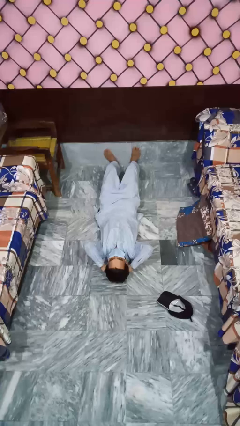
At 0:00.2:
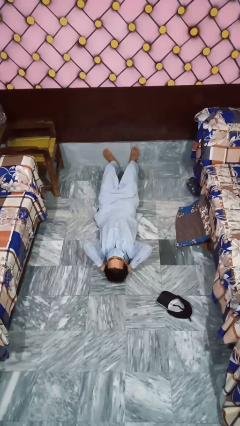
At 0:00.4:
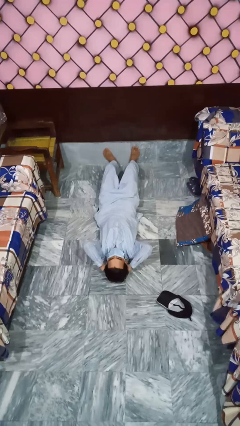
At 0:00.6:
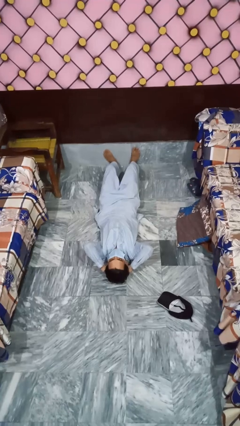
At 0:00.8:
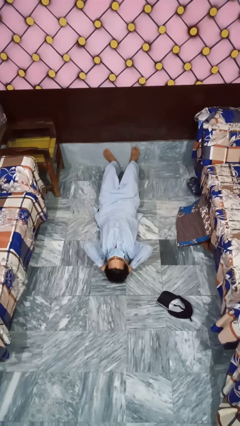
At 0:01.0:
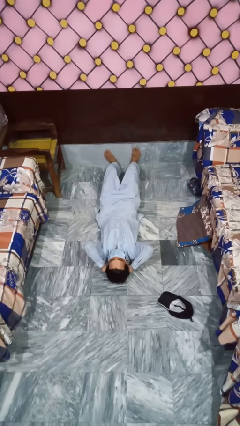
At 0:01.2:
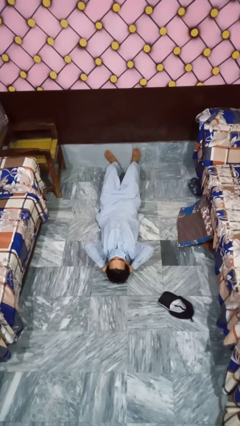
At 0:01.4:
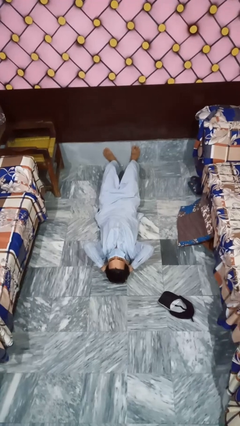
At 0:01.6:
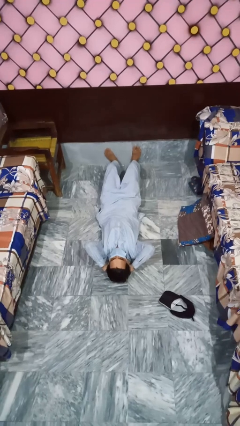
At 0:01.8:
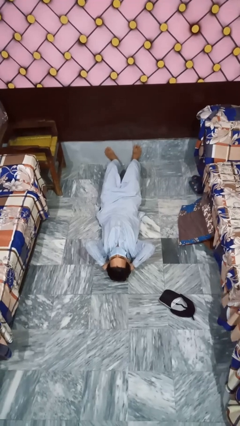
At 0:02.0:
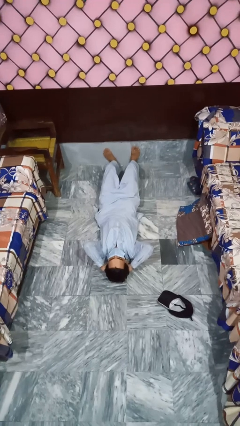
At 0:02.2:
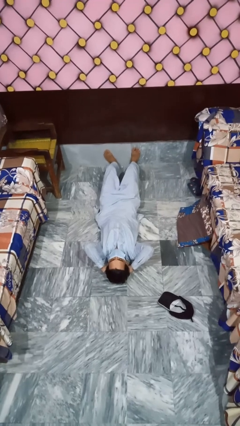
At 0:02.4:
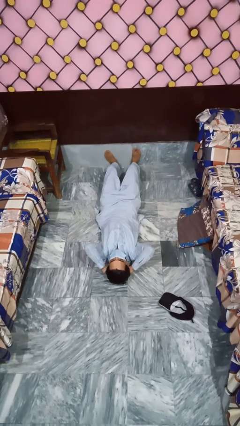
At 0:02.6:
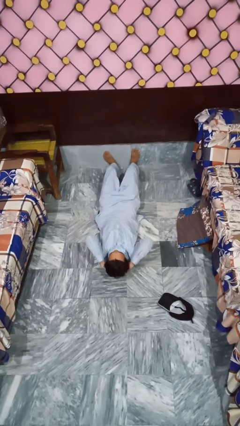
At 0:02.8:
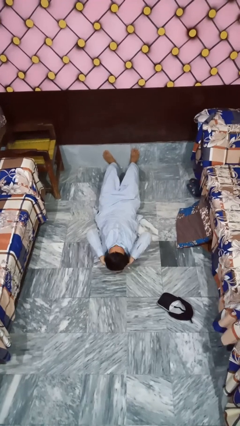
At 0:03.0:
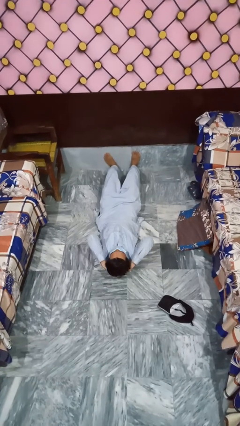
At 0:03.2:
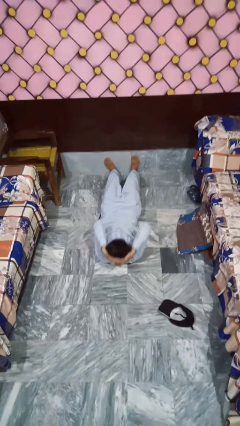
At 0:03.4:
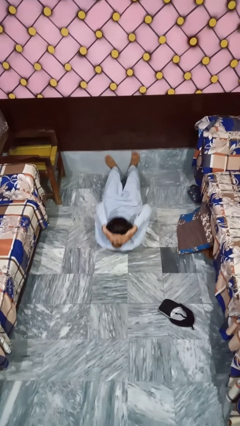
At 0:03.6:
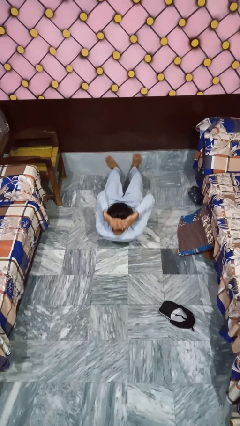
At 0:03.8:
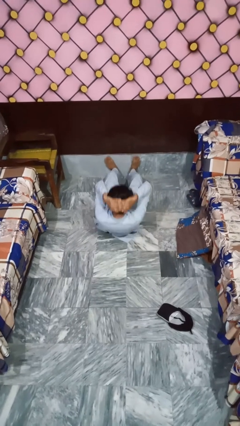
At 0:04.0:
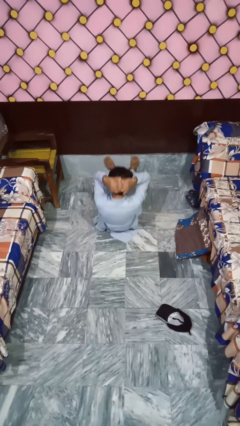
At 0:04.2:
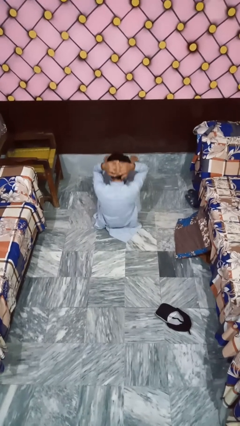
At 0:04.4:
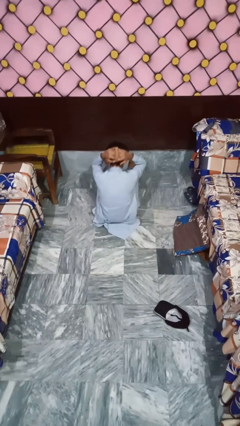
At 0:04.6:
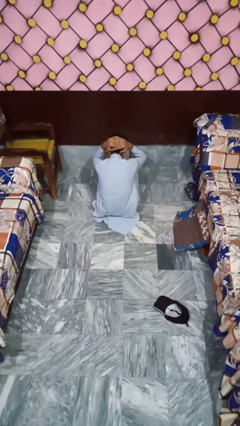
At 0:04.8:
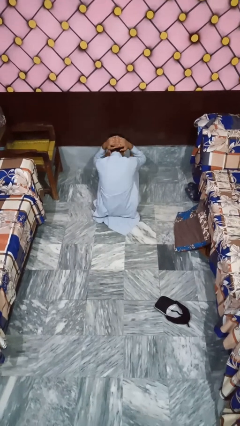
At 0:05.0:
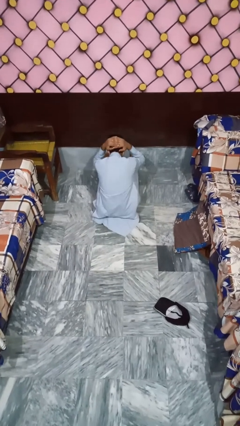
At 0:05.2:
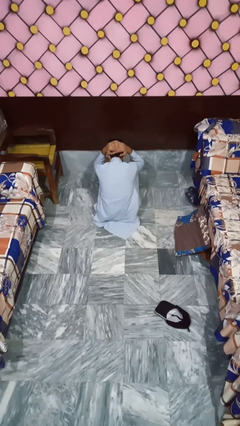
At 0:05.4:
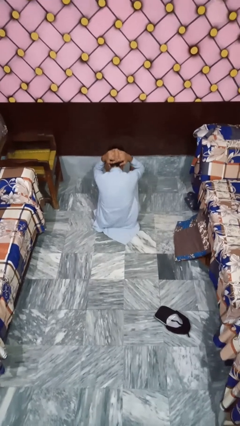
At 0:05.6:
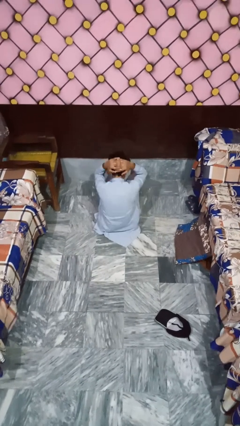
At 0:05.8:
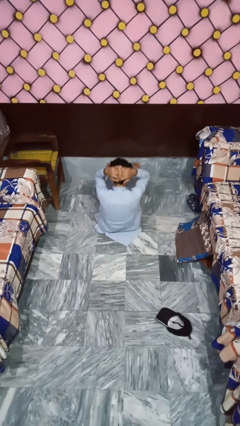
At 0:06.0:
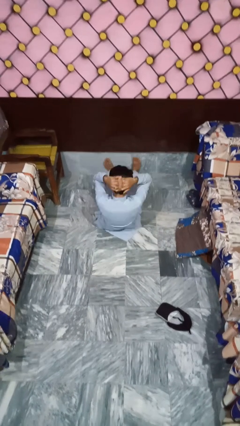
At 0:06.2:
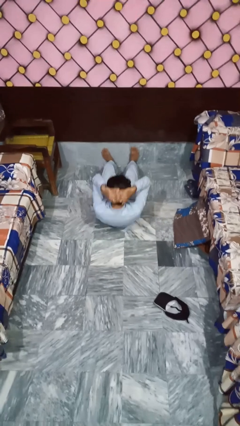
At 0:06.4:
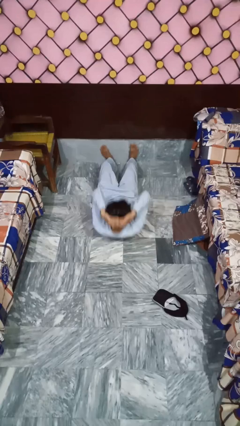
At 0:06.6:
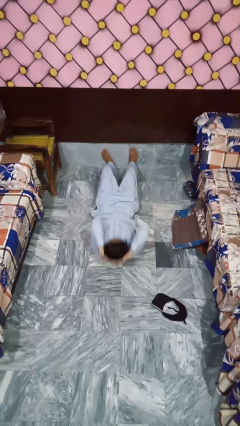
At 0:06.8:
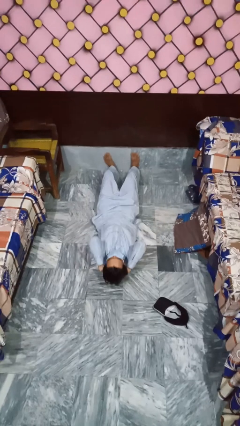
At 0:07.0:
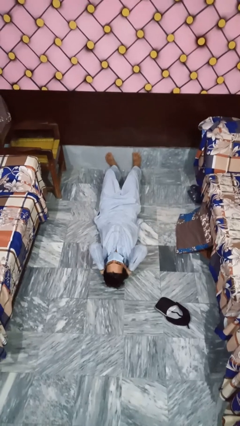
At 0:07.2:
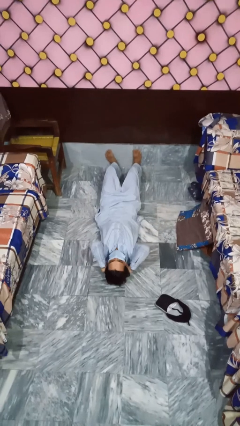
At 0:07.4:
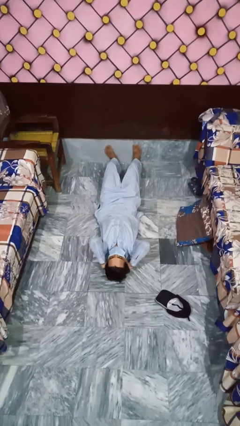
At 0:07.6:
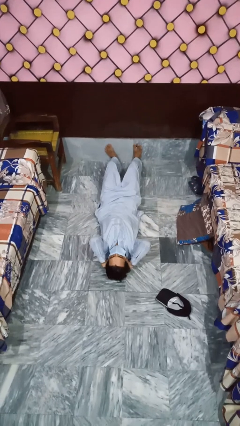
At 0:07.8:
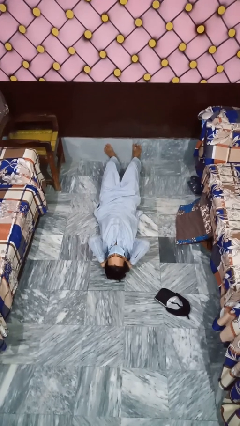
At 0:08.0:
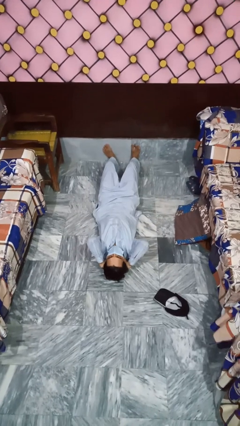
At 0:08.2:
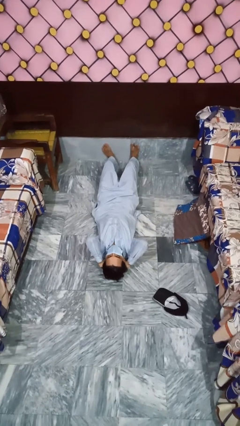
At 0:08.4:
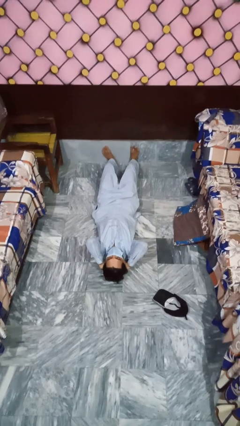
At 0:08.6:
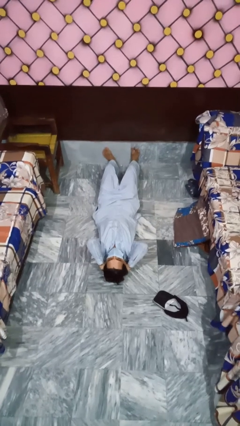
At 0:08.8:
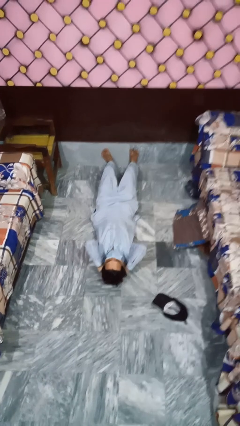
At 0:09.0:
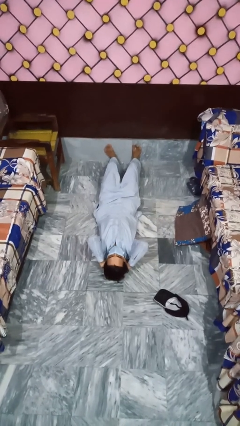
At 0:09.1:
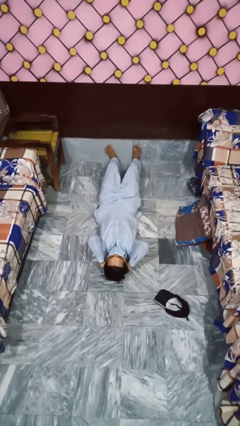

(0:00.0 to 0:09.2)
person exercises with situp

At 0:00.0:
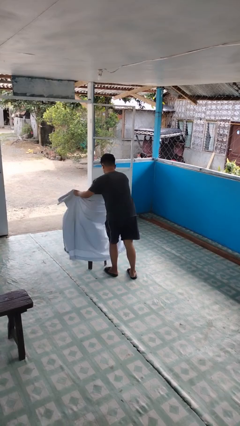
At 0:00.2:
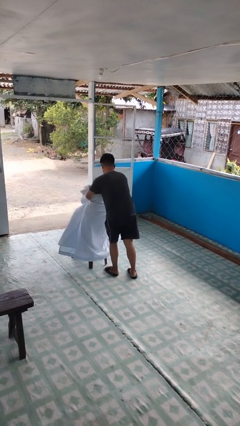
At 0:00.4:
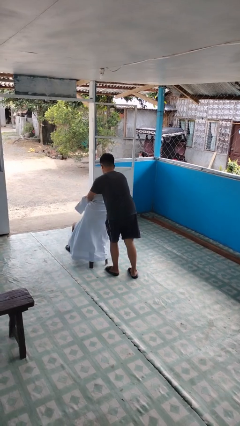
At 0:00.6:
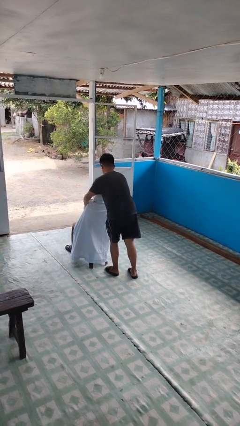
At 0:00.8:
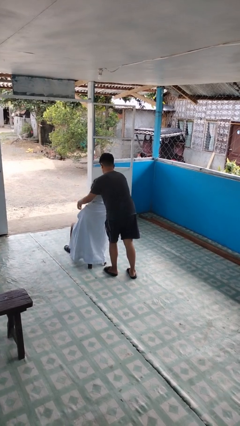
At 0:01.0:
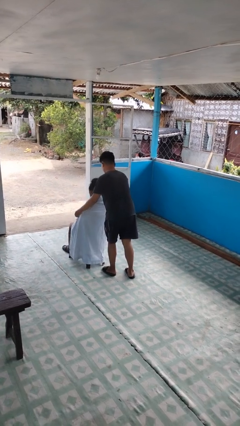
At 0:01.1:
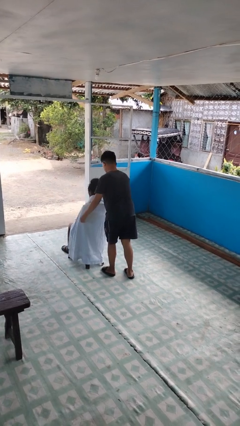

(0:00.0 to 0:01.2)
person covers friend with blanket

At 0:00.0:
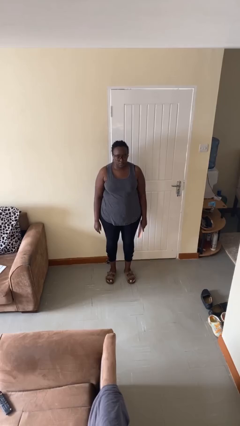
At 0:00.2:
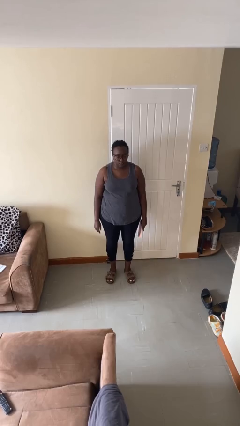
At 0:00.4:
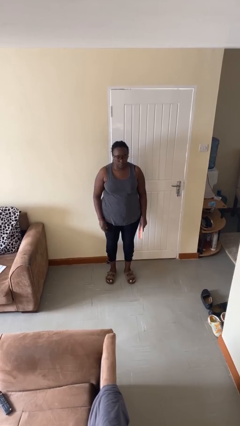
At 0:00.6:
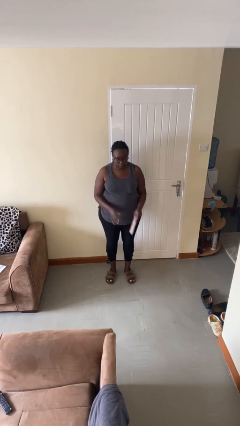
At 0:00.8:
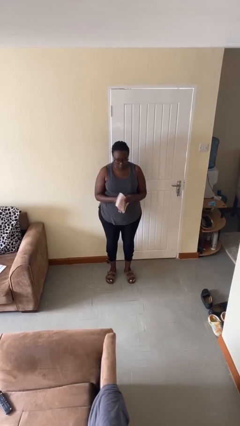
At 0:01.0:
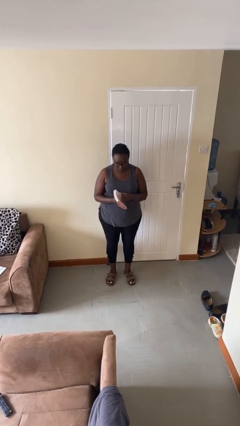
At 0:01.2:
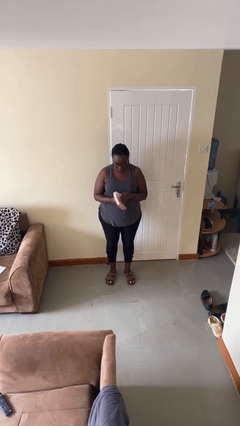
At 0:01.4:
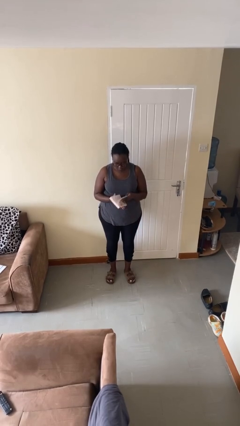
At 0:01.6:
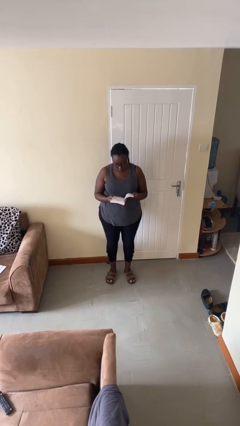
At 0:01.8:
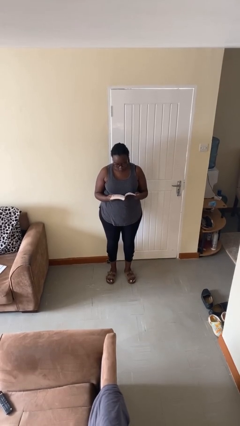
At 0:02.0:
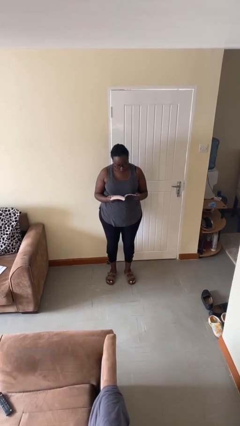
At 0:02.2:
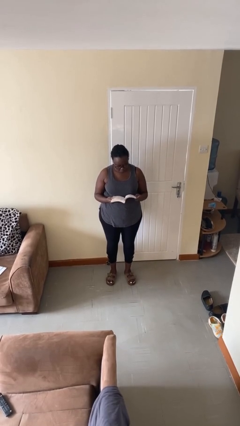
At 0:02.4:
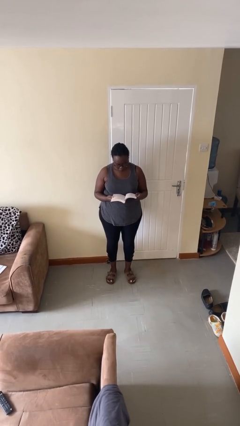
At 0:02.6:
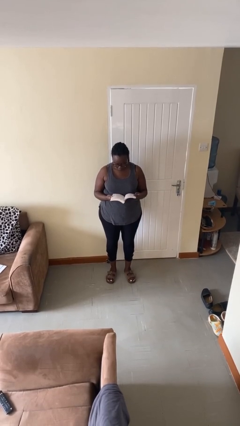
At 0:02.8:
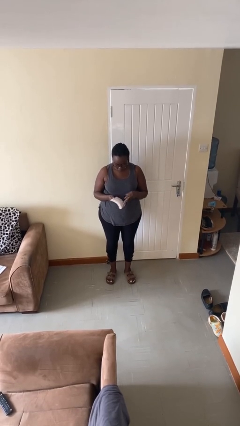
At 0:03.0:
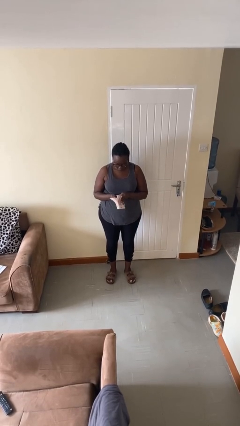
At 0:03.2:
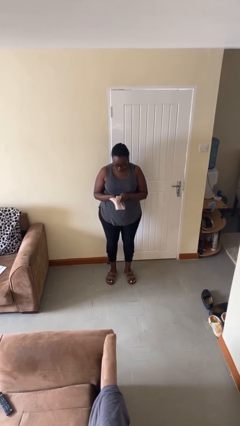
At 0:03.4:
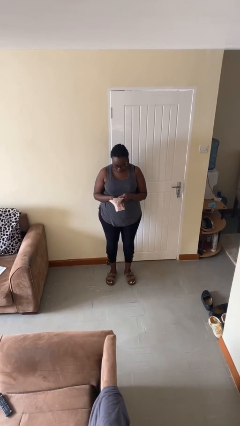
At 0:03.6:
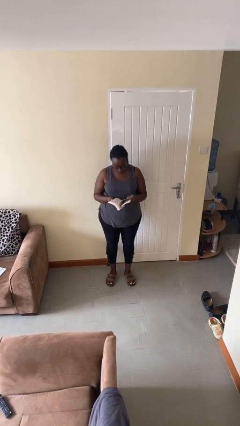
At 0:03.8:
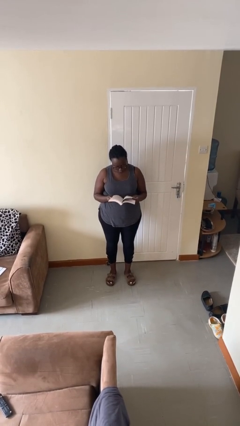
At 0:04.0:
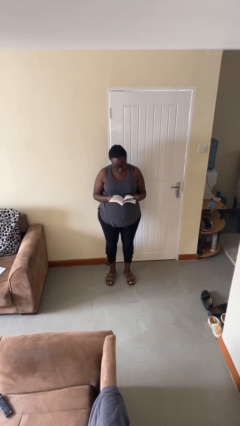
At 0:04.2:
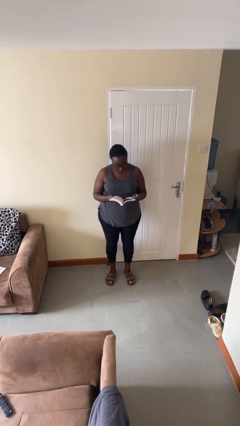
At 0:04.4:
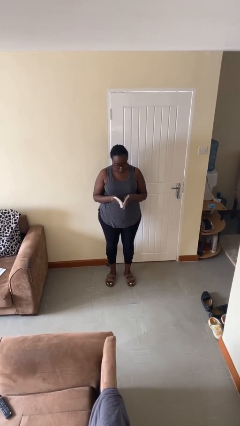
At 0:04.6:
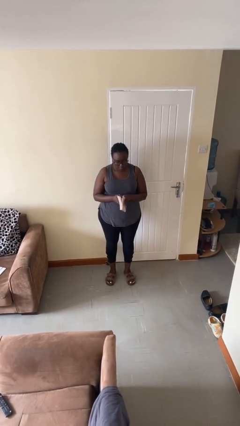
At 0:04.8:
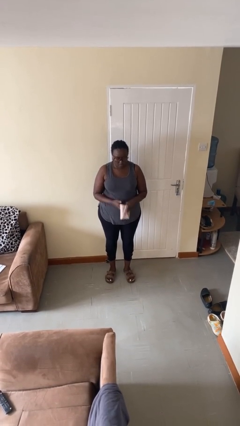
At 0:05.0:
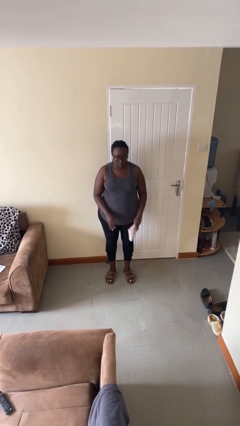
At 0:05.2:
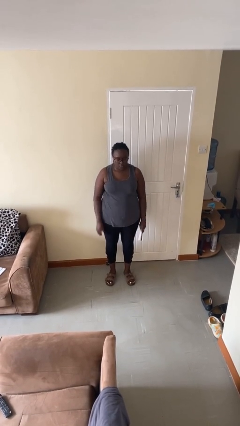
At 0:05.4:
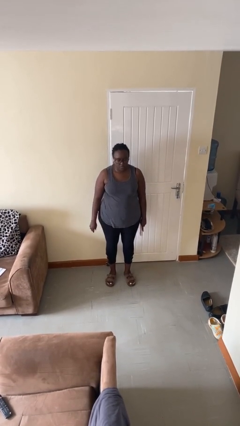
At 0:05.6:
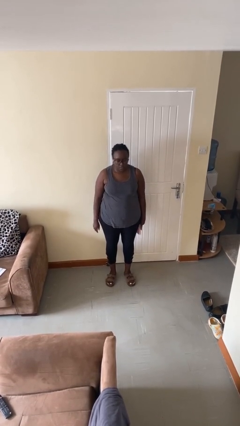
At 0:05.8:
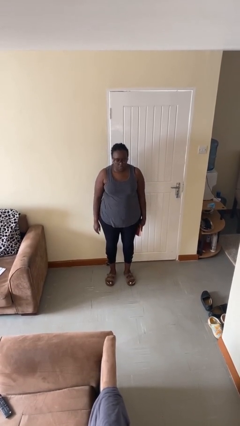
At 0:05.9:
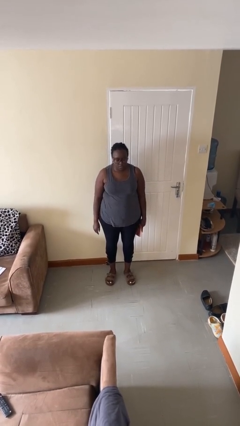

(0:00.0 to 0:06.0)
person reads book

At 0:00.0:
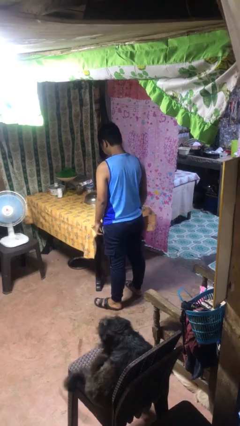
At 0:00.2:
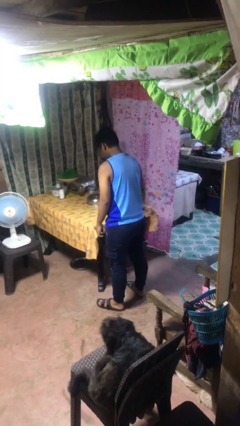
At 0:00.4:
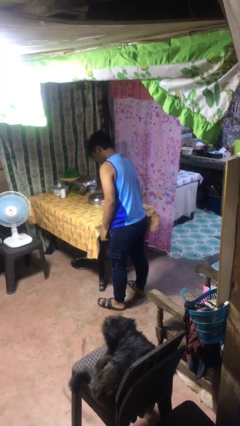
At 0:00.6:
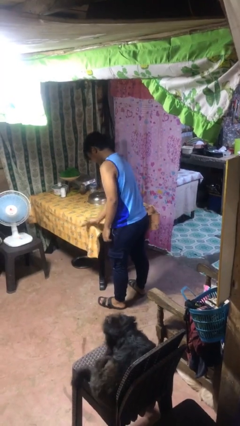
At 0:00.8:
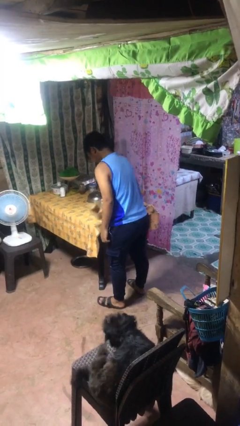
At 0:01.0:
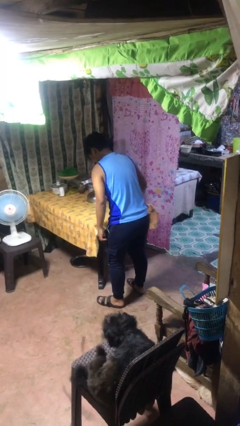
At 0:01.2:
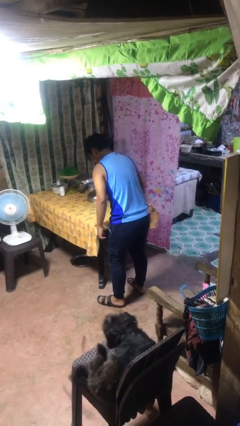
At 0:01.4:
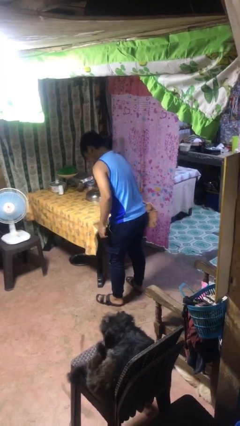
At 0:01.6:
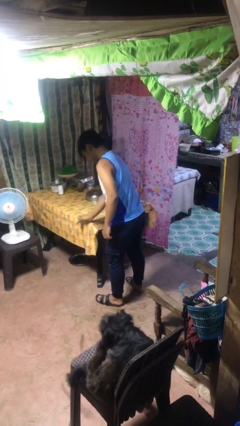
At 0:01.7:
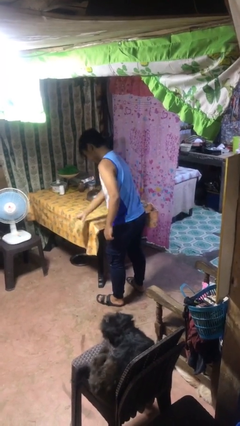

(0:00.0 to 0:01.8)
person cleans table with rag
